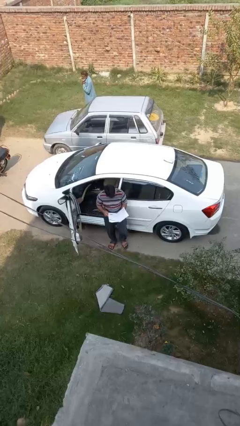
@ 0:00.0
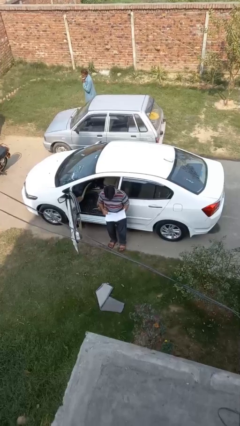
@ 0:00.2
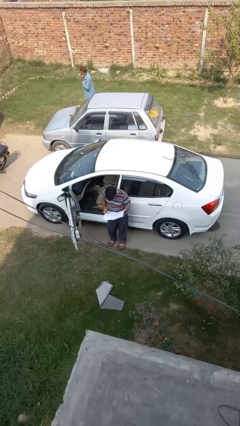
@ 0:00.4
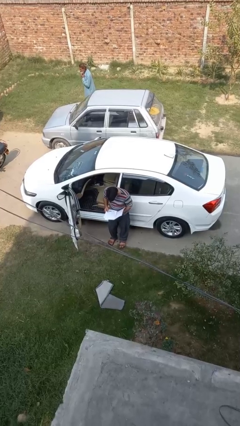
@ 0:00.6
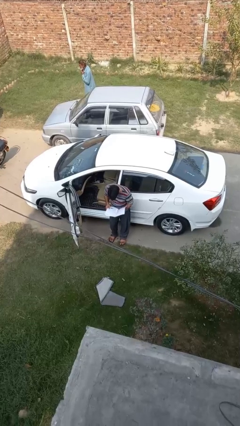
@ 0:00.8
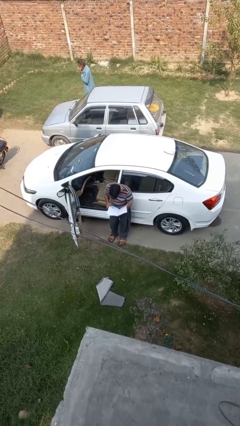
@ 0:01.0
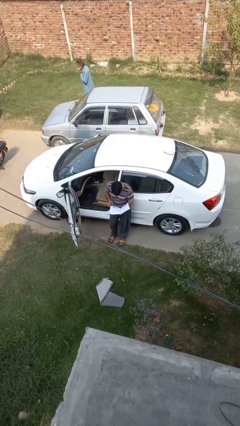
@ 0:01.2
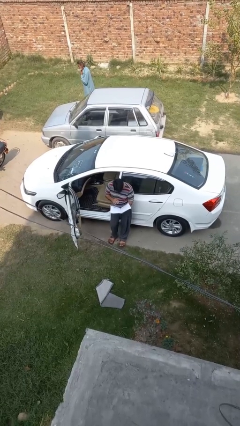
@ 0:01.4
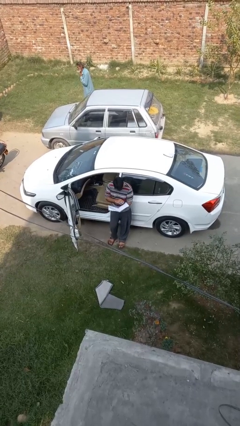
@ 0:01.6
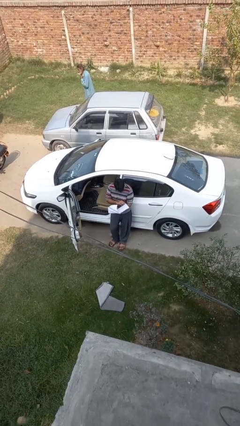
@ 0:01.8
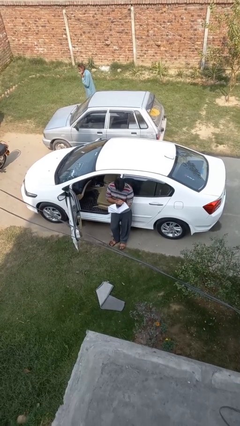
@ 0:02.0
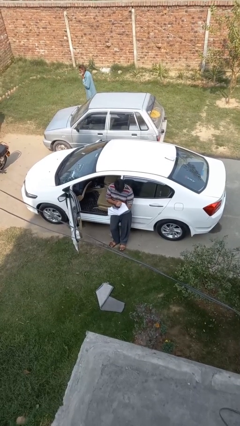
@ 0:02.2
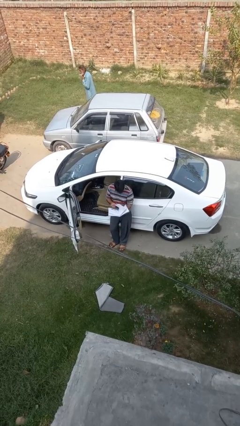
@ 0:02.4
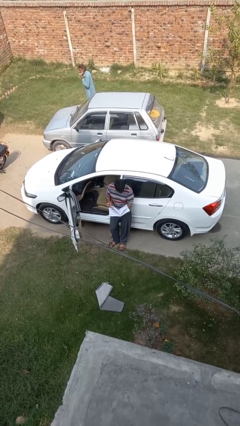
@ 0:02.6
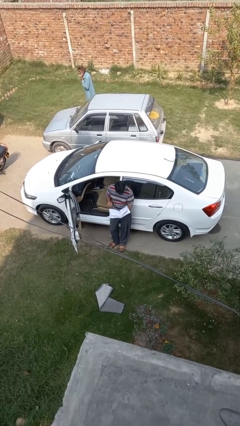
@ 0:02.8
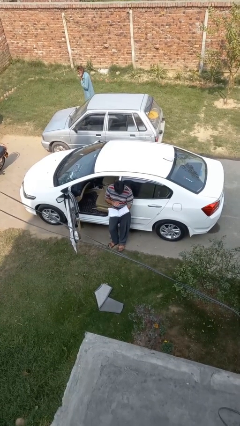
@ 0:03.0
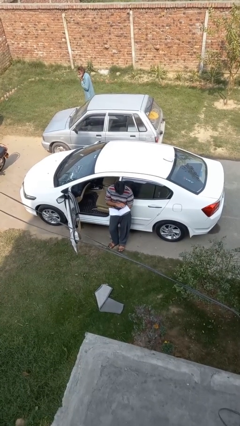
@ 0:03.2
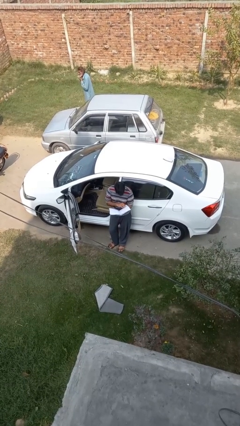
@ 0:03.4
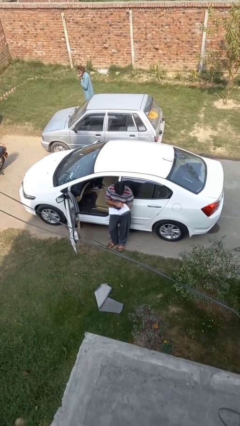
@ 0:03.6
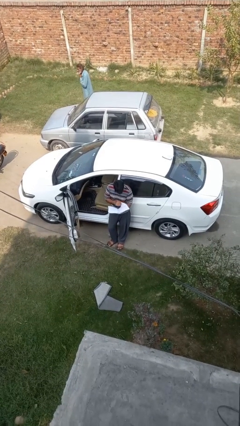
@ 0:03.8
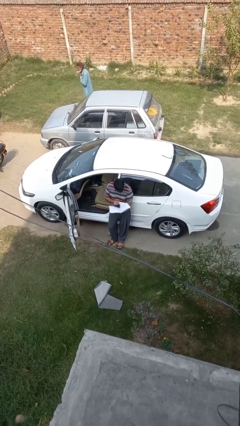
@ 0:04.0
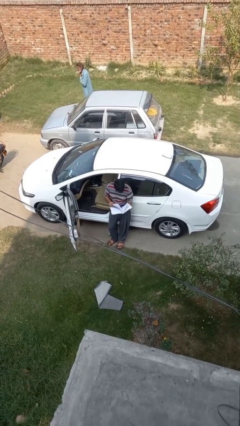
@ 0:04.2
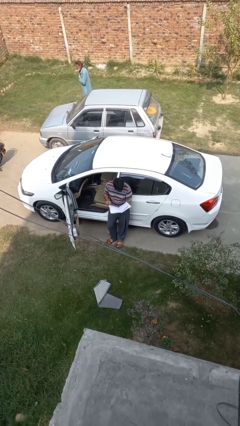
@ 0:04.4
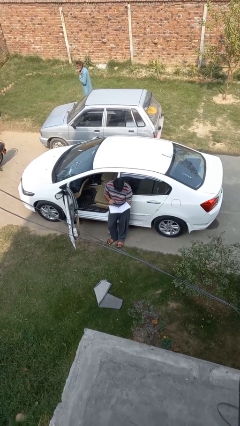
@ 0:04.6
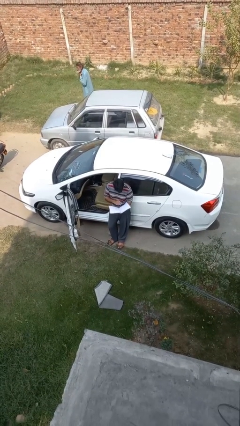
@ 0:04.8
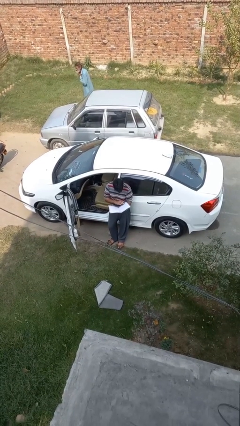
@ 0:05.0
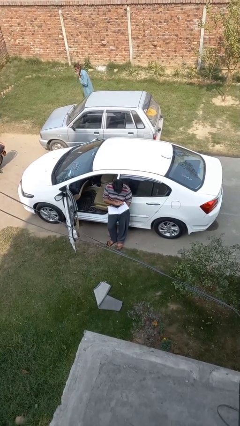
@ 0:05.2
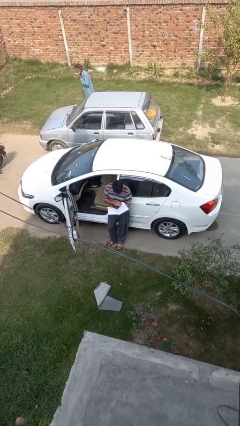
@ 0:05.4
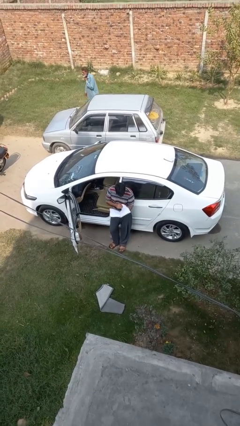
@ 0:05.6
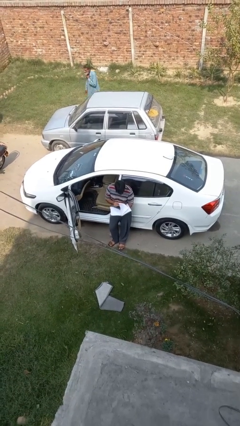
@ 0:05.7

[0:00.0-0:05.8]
person reads document

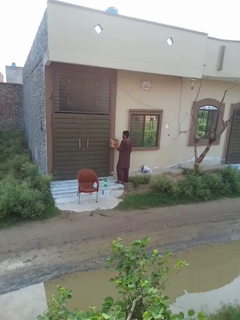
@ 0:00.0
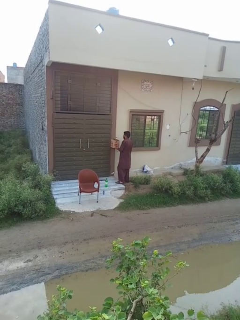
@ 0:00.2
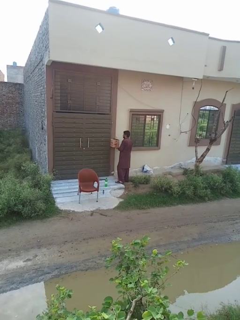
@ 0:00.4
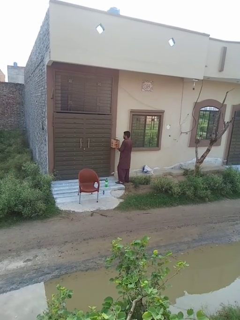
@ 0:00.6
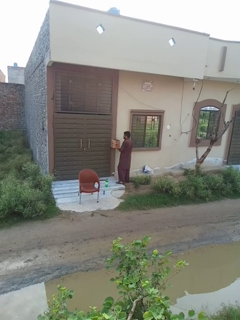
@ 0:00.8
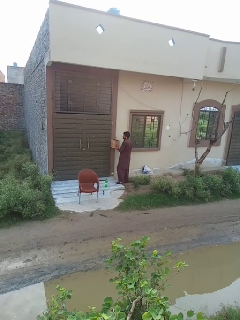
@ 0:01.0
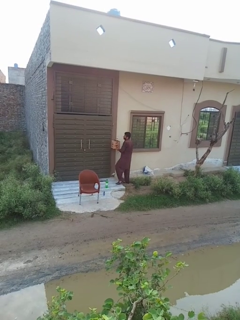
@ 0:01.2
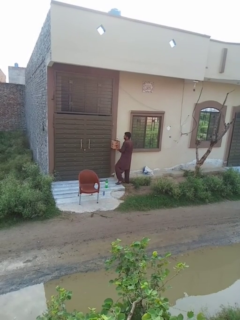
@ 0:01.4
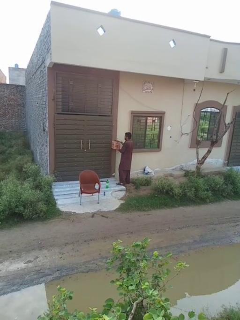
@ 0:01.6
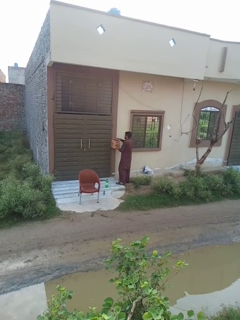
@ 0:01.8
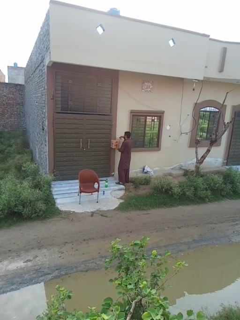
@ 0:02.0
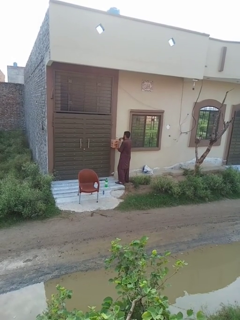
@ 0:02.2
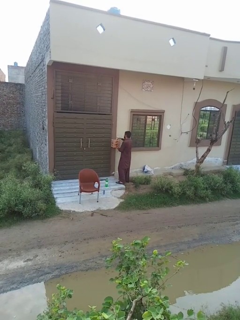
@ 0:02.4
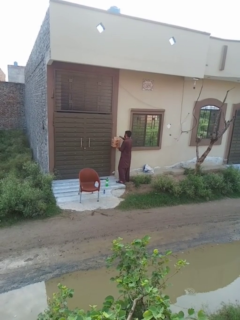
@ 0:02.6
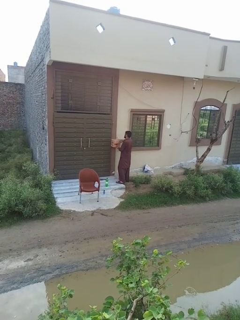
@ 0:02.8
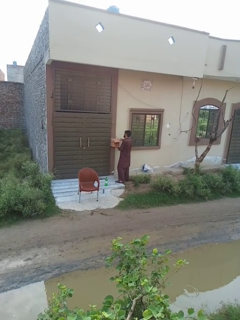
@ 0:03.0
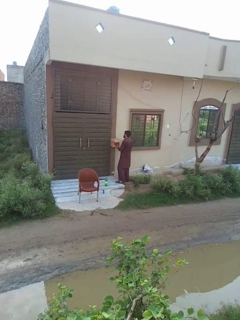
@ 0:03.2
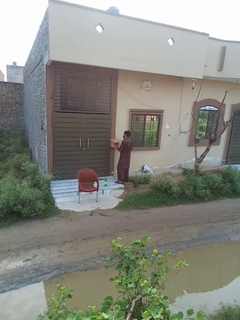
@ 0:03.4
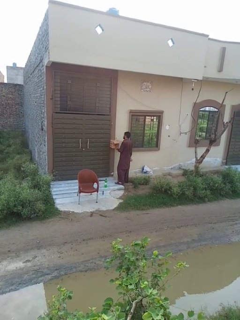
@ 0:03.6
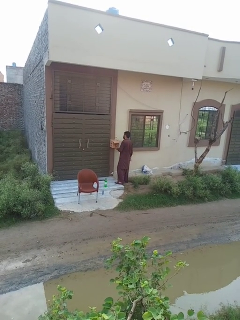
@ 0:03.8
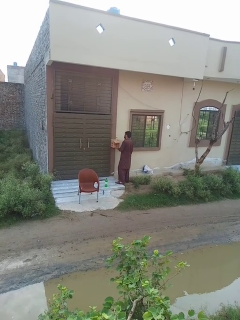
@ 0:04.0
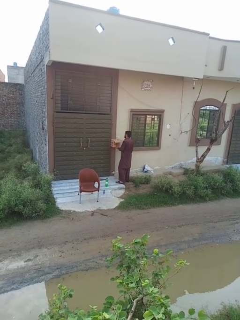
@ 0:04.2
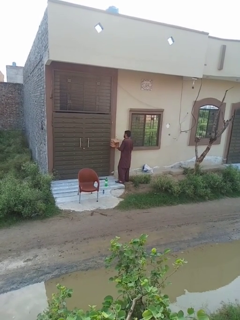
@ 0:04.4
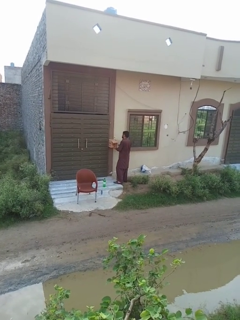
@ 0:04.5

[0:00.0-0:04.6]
person opens mailbox

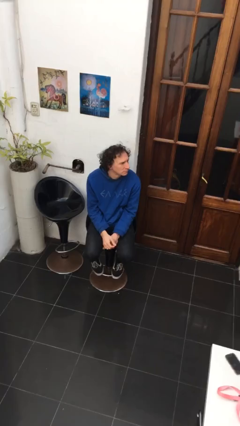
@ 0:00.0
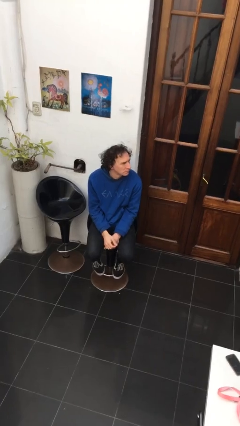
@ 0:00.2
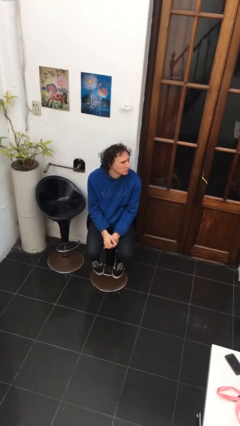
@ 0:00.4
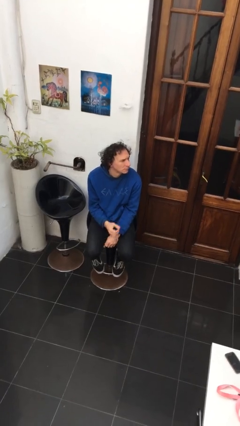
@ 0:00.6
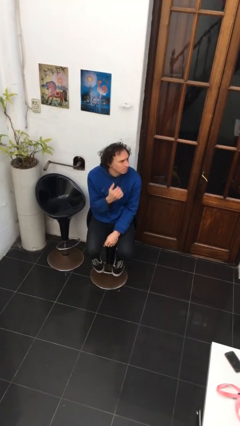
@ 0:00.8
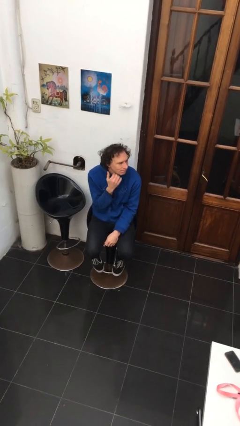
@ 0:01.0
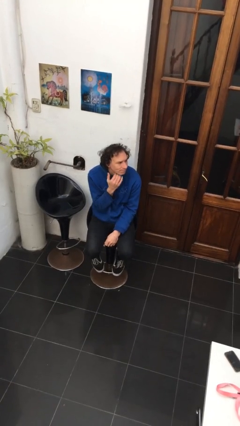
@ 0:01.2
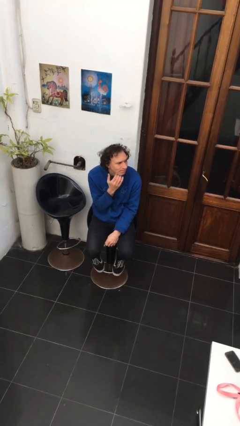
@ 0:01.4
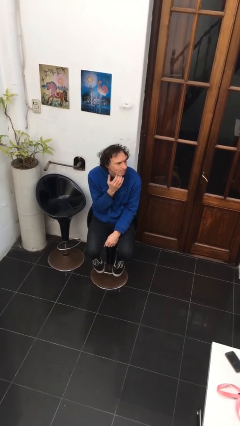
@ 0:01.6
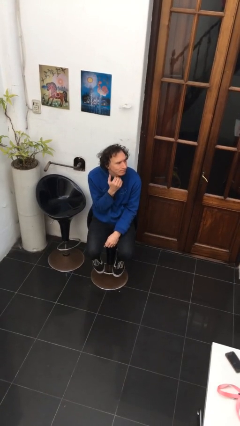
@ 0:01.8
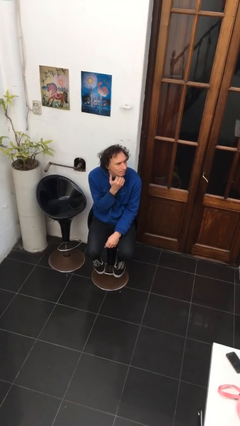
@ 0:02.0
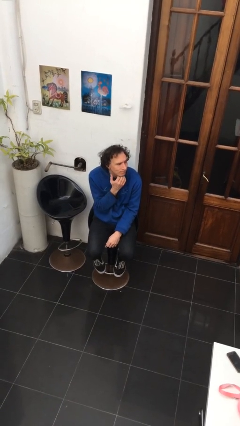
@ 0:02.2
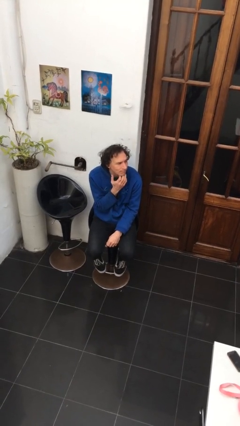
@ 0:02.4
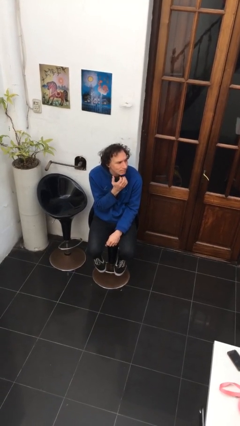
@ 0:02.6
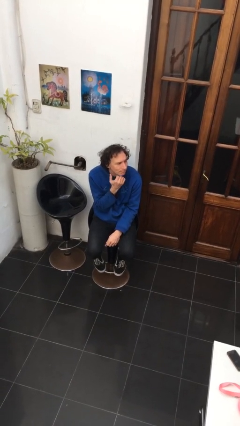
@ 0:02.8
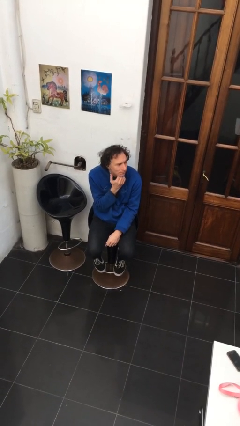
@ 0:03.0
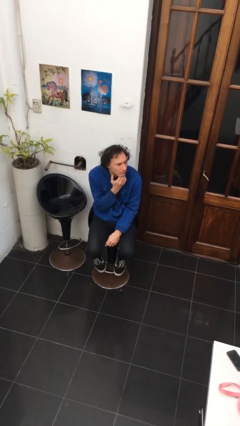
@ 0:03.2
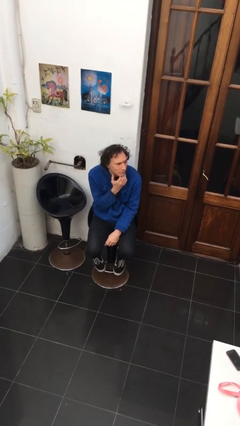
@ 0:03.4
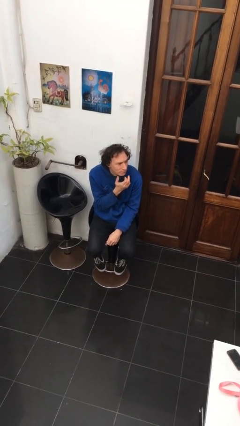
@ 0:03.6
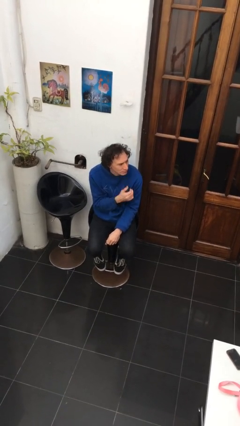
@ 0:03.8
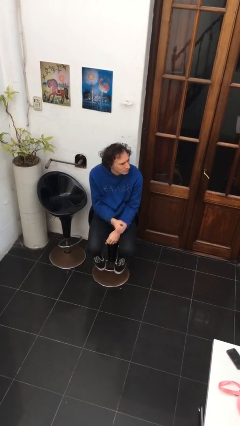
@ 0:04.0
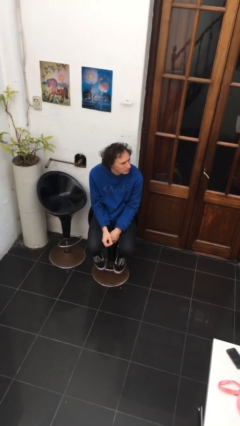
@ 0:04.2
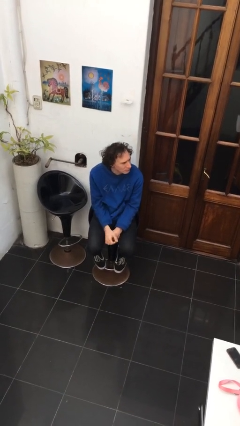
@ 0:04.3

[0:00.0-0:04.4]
person strokes chin

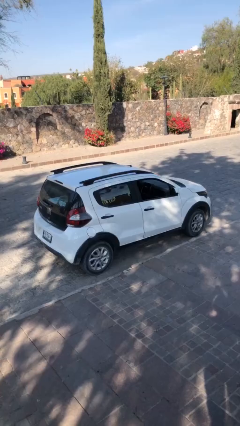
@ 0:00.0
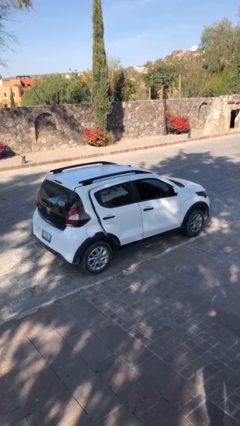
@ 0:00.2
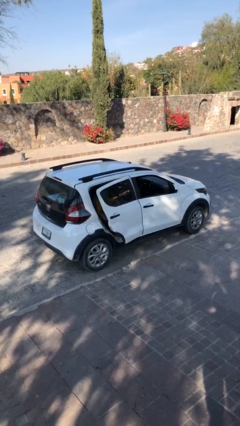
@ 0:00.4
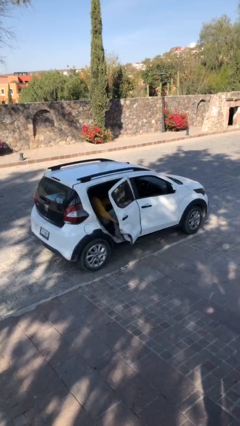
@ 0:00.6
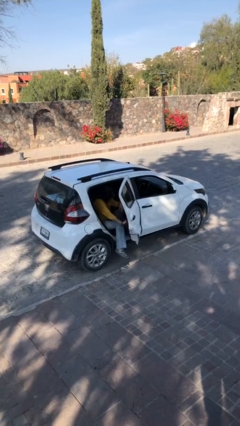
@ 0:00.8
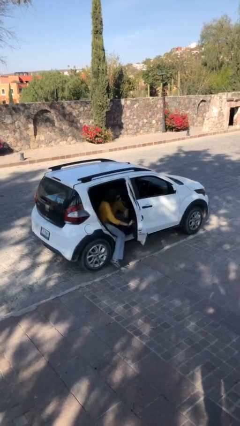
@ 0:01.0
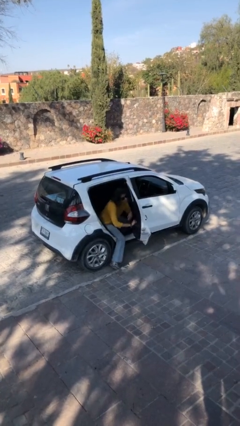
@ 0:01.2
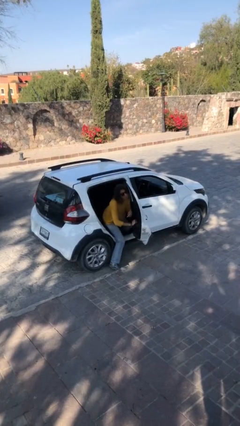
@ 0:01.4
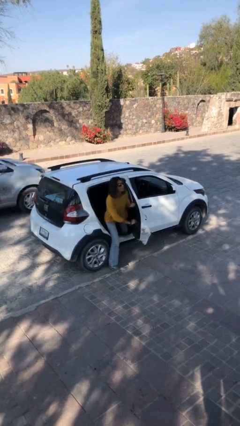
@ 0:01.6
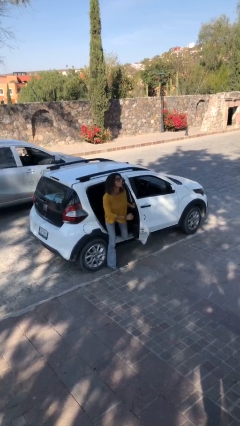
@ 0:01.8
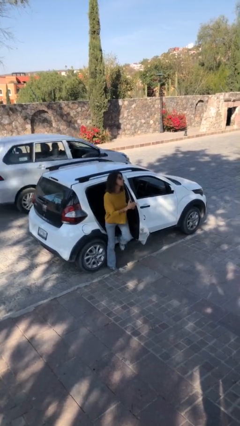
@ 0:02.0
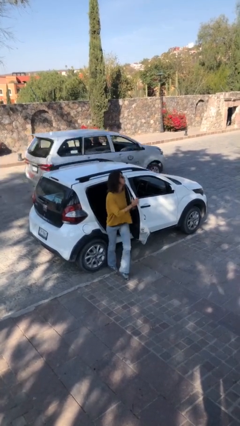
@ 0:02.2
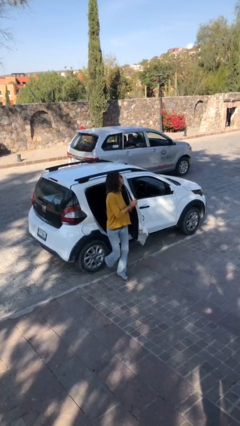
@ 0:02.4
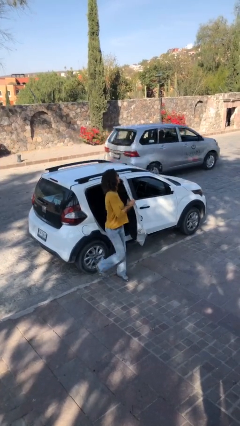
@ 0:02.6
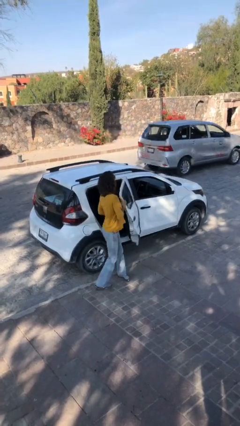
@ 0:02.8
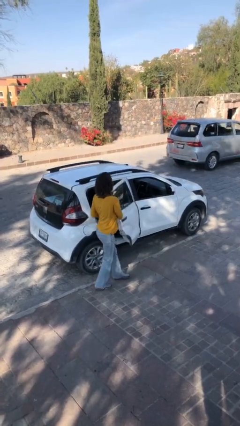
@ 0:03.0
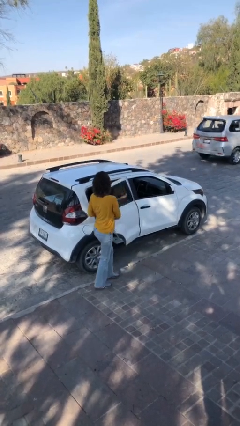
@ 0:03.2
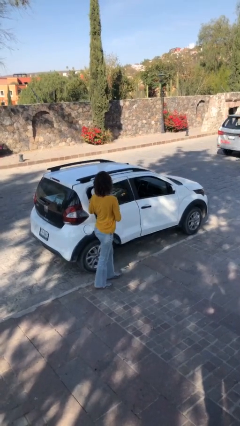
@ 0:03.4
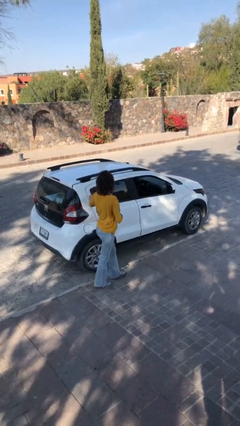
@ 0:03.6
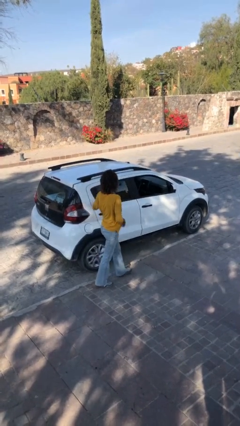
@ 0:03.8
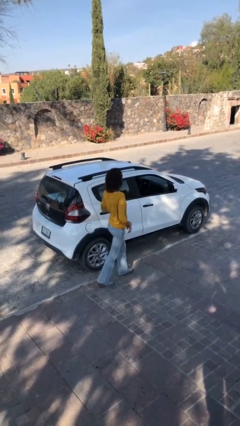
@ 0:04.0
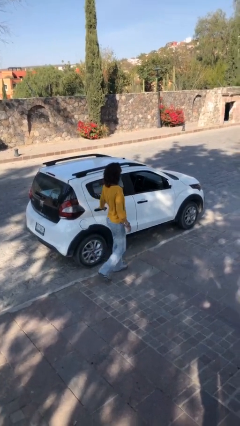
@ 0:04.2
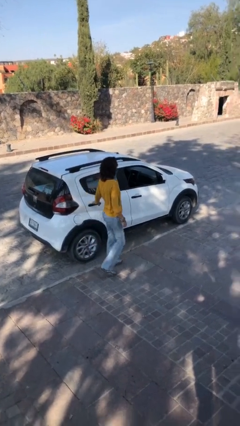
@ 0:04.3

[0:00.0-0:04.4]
car drops off person
